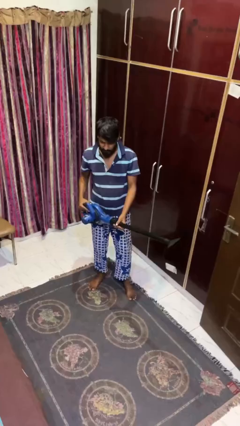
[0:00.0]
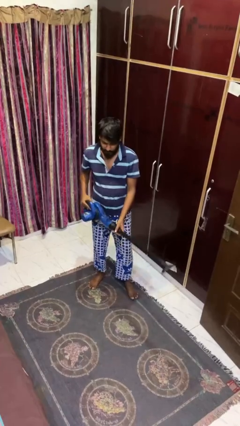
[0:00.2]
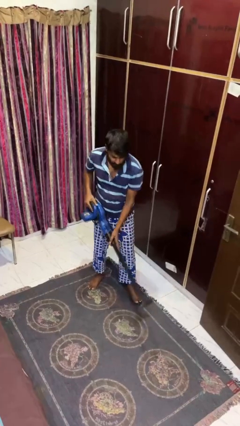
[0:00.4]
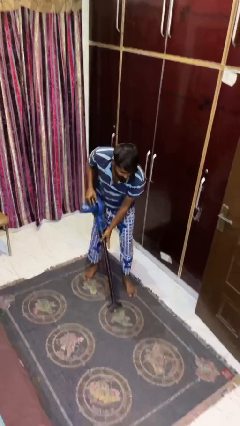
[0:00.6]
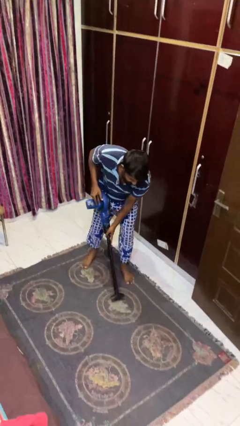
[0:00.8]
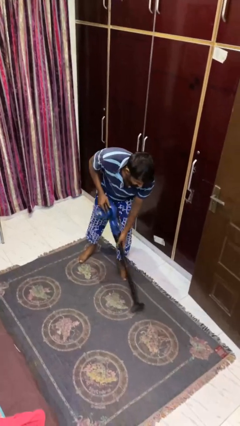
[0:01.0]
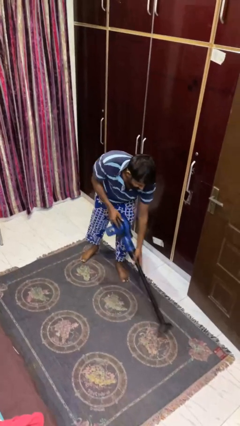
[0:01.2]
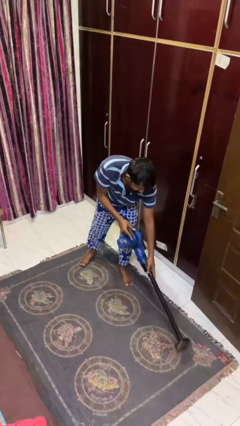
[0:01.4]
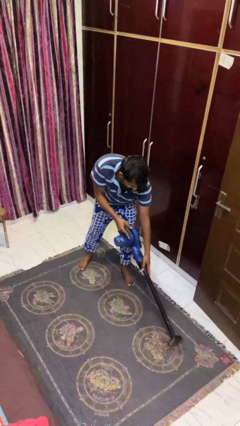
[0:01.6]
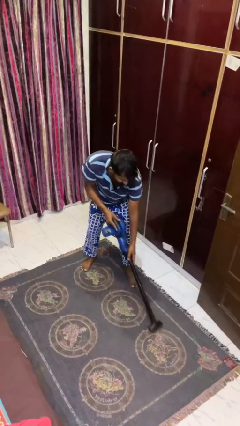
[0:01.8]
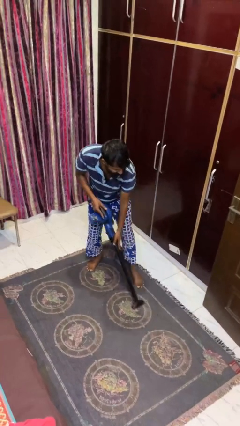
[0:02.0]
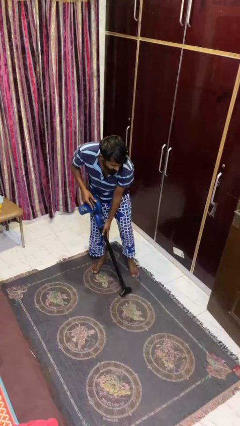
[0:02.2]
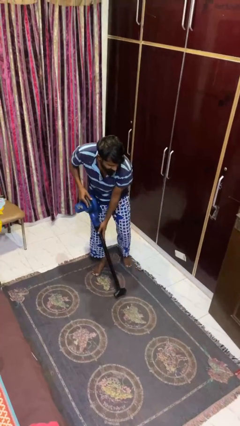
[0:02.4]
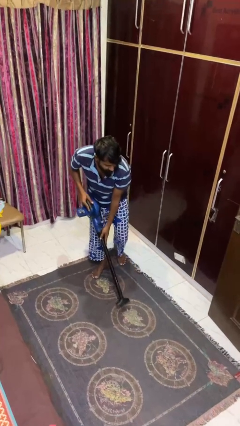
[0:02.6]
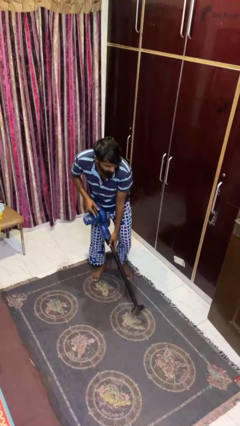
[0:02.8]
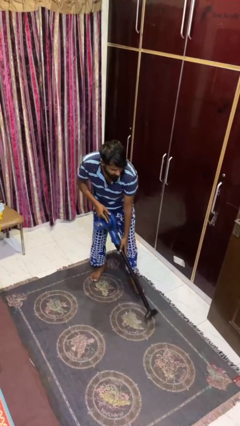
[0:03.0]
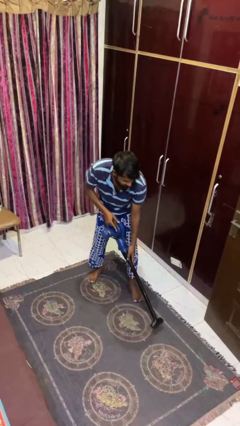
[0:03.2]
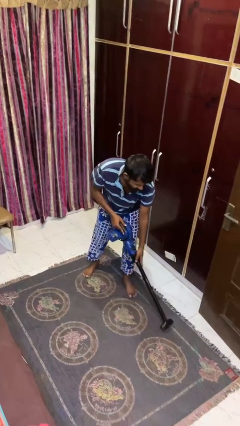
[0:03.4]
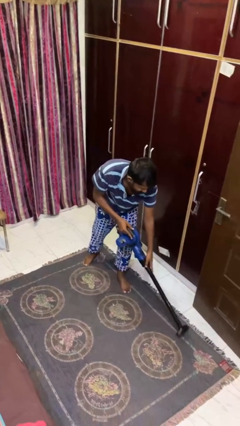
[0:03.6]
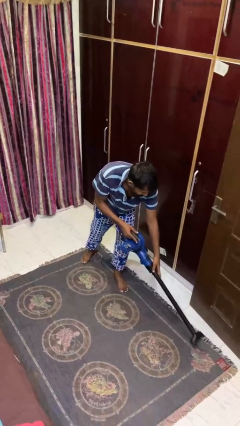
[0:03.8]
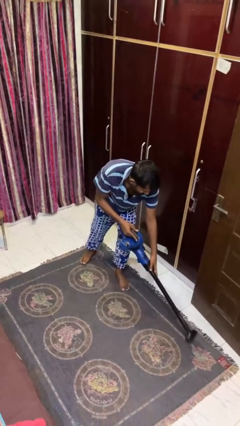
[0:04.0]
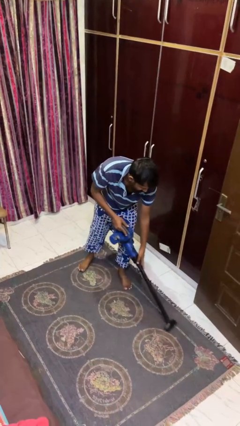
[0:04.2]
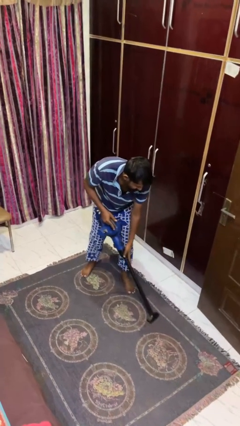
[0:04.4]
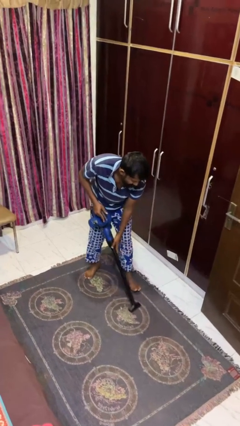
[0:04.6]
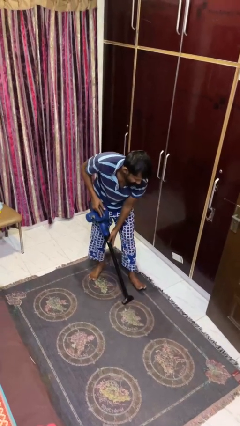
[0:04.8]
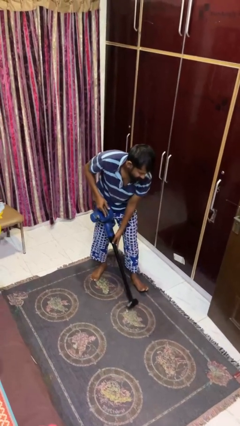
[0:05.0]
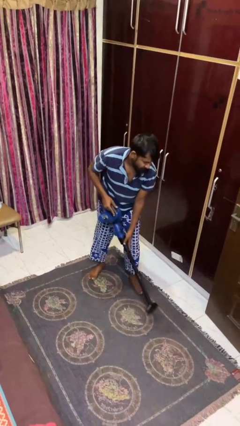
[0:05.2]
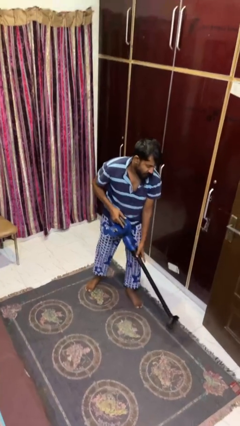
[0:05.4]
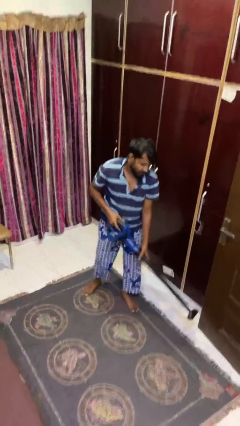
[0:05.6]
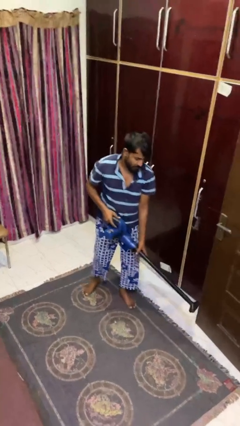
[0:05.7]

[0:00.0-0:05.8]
person vacuums carpet

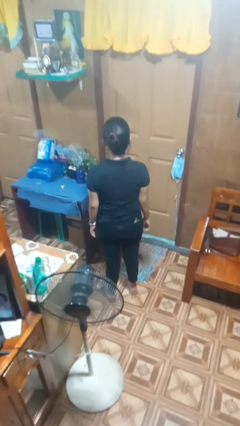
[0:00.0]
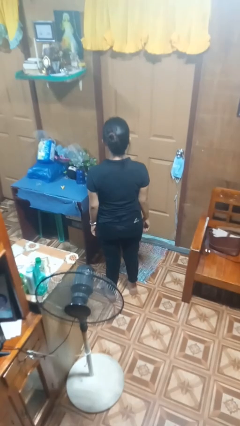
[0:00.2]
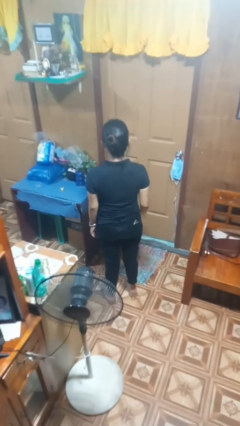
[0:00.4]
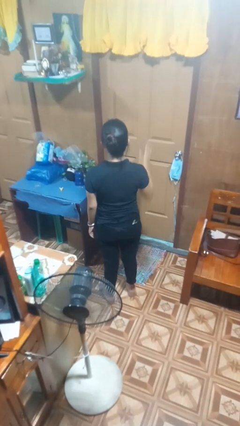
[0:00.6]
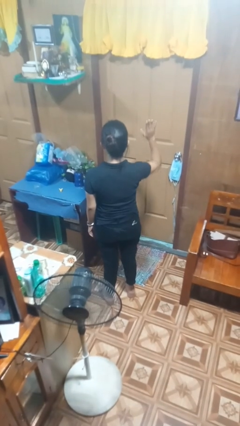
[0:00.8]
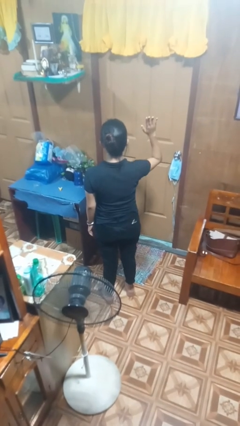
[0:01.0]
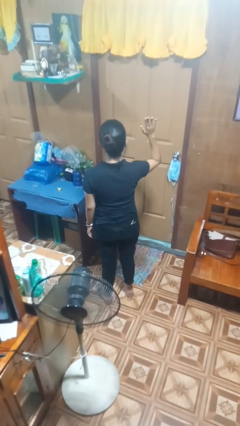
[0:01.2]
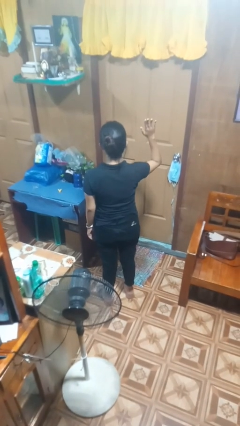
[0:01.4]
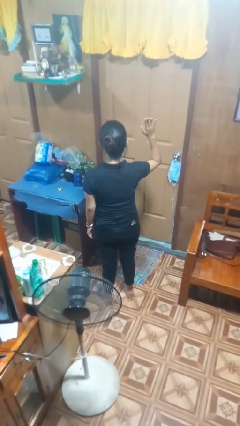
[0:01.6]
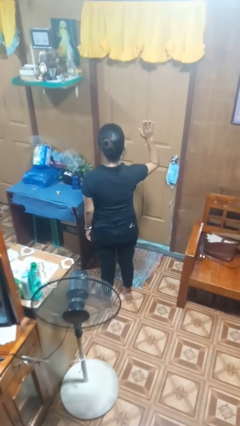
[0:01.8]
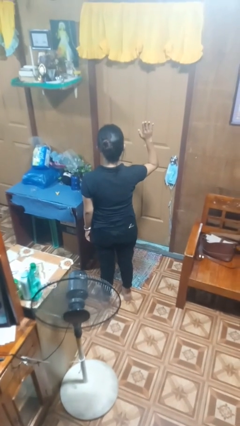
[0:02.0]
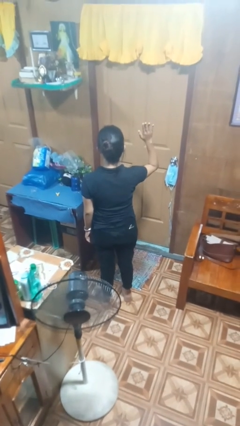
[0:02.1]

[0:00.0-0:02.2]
person gestures raise hand

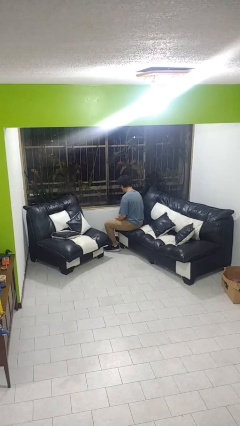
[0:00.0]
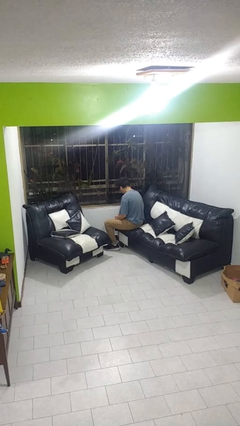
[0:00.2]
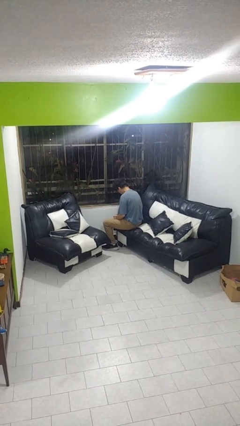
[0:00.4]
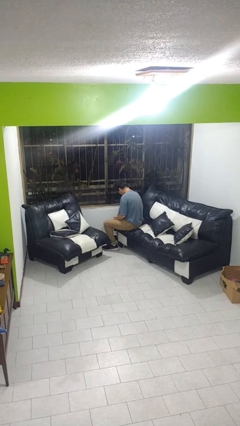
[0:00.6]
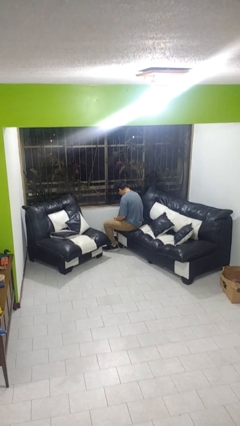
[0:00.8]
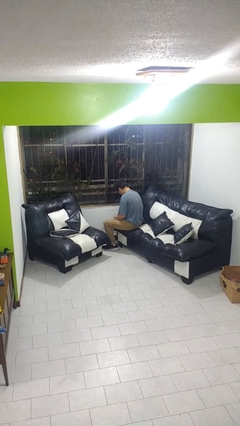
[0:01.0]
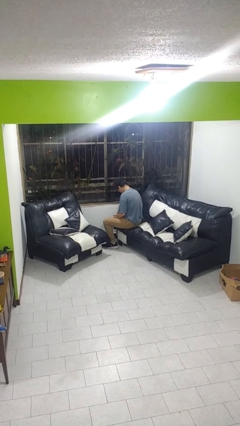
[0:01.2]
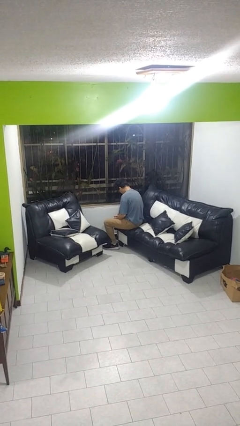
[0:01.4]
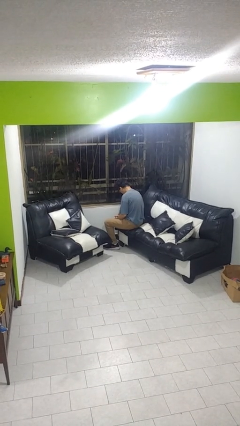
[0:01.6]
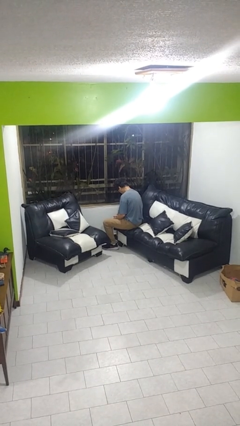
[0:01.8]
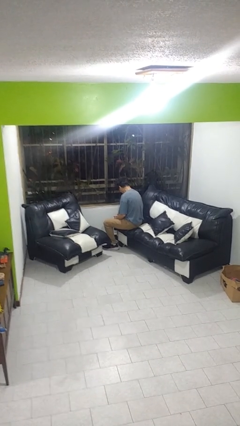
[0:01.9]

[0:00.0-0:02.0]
person looks at hands in lap

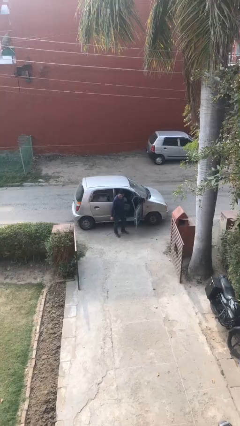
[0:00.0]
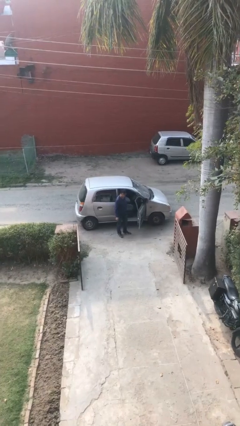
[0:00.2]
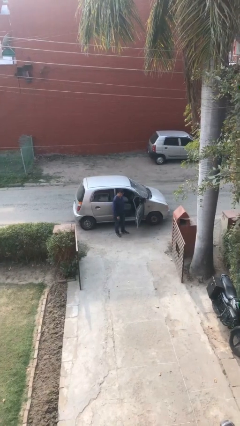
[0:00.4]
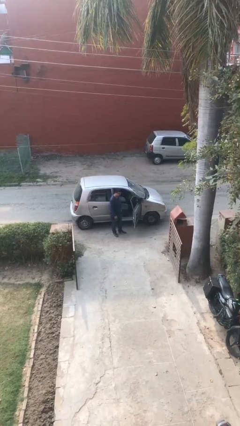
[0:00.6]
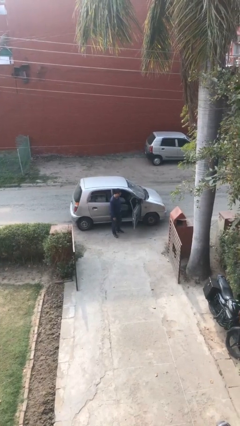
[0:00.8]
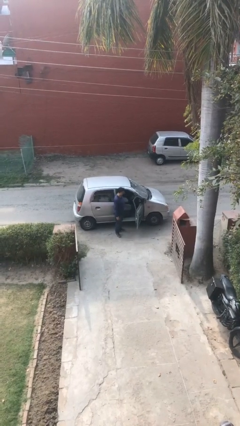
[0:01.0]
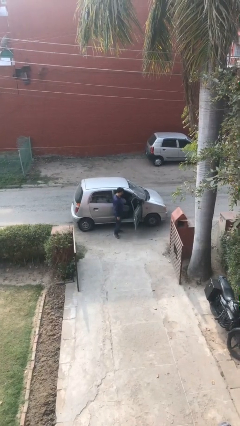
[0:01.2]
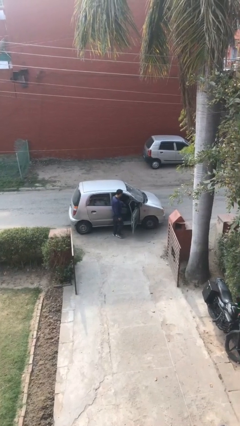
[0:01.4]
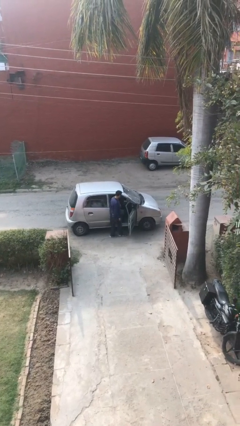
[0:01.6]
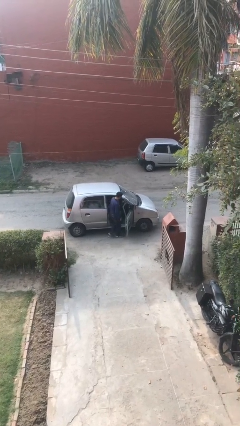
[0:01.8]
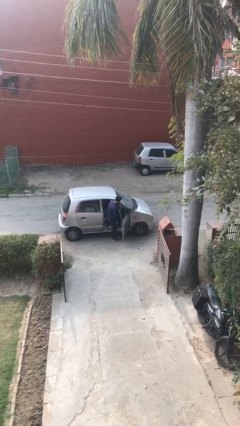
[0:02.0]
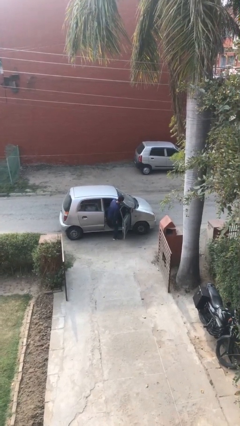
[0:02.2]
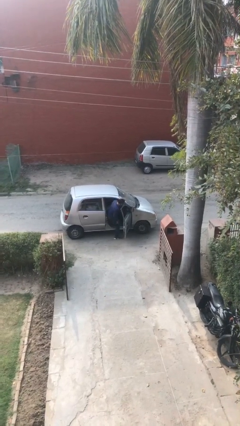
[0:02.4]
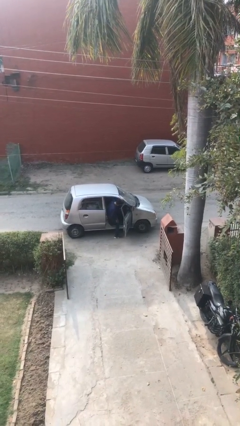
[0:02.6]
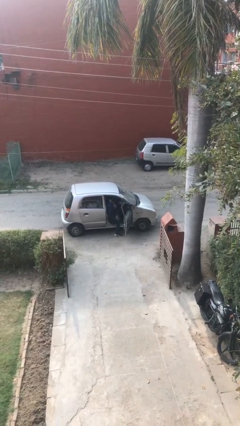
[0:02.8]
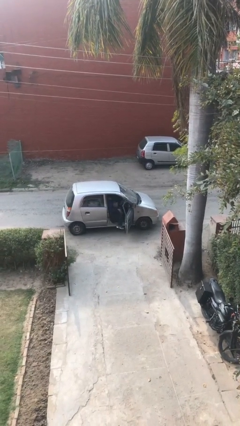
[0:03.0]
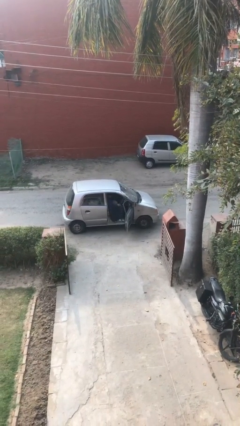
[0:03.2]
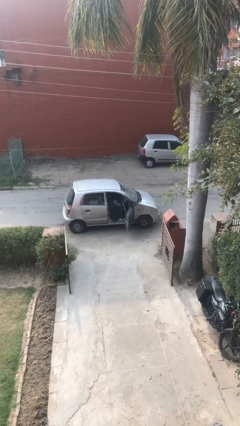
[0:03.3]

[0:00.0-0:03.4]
person enters car

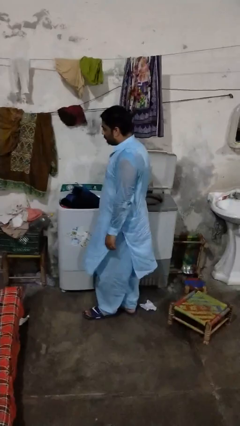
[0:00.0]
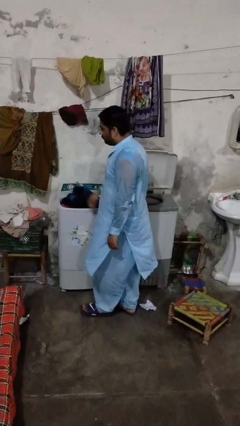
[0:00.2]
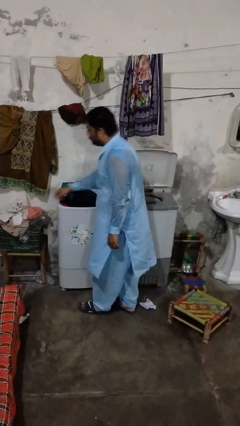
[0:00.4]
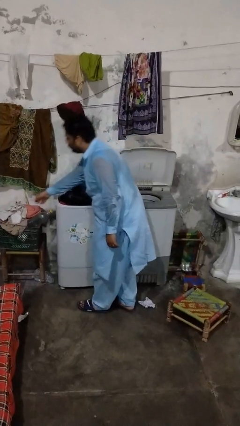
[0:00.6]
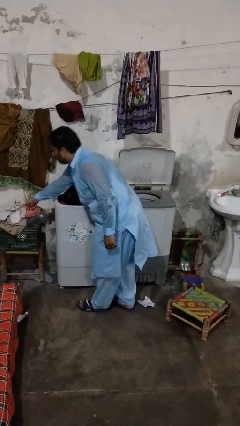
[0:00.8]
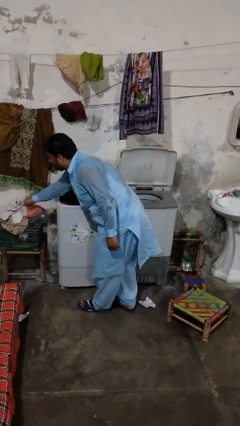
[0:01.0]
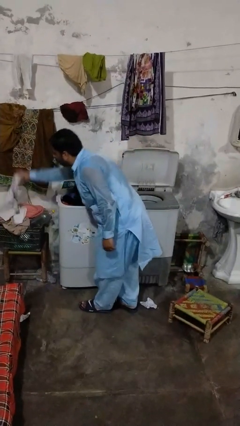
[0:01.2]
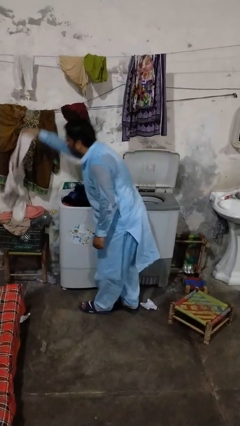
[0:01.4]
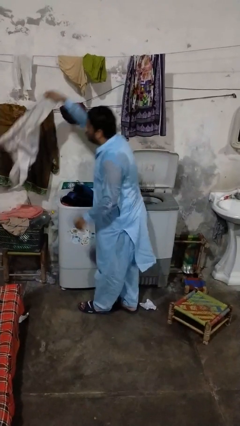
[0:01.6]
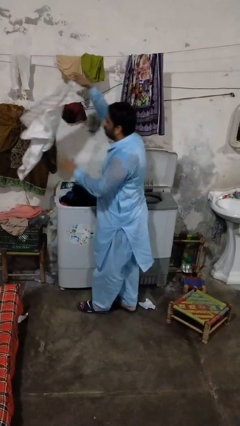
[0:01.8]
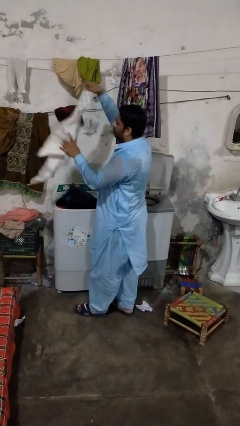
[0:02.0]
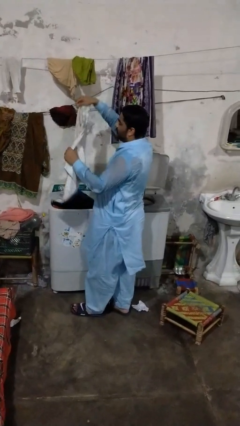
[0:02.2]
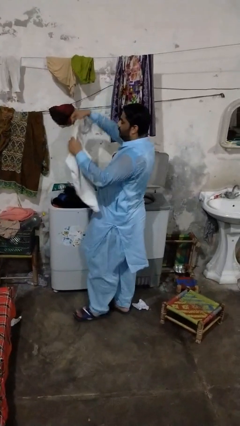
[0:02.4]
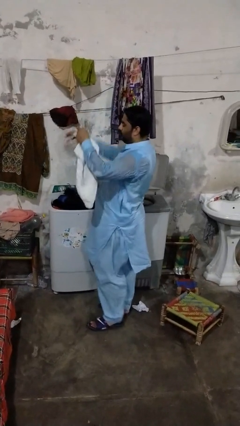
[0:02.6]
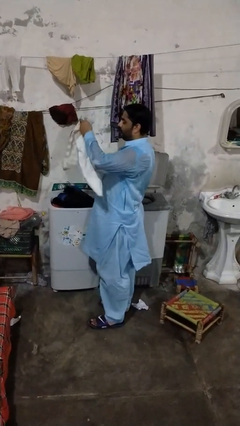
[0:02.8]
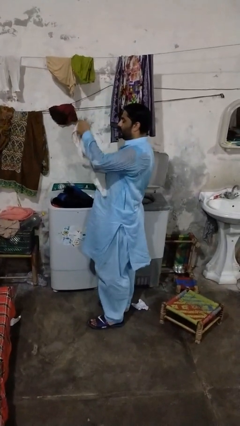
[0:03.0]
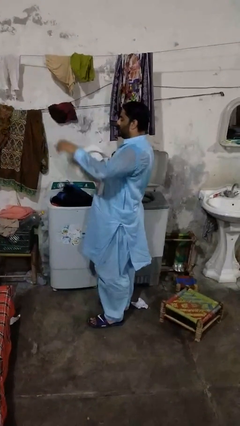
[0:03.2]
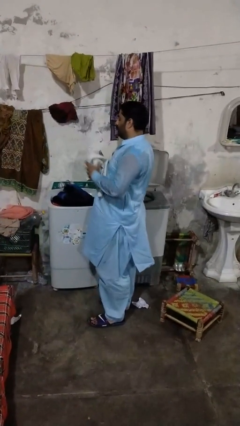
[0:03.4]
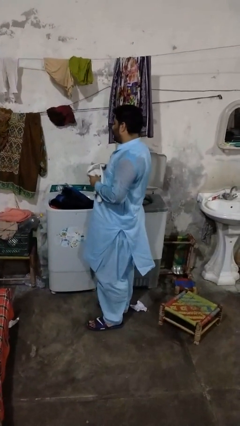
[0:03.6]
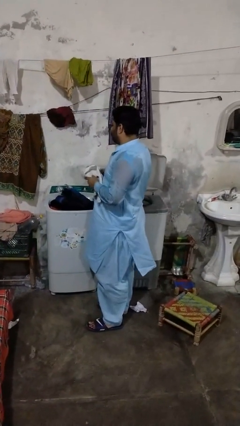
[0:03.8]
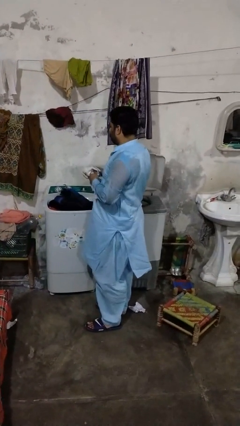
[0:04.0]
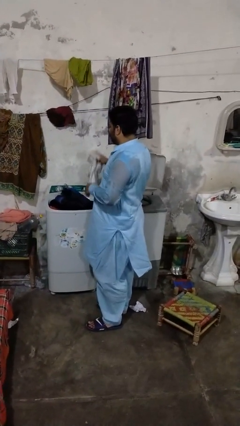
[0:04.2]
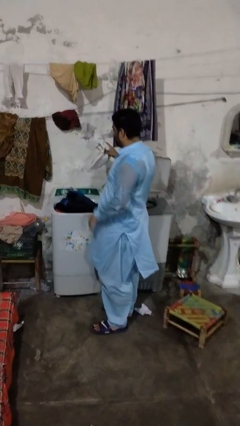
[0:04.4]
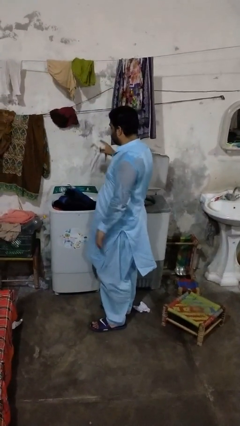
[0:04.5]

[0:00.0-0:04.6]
person loads clotheswasher
